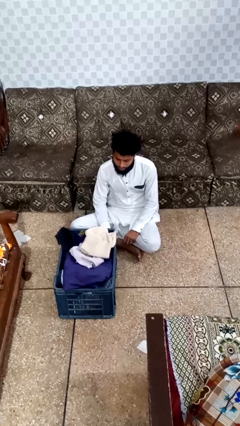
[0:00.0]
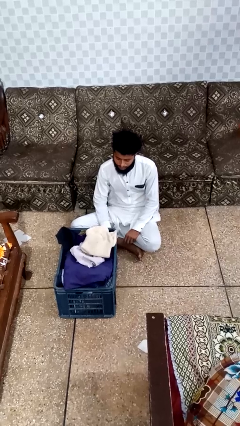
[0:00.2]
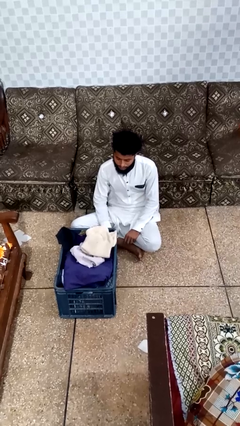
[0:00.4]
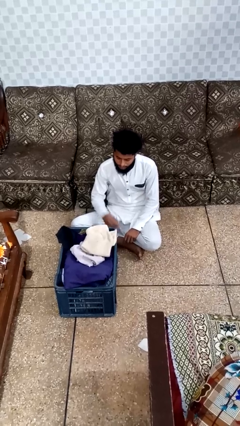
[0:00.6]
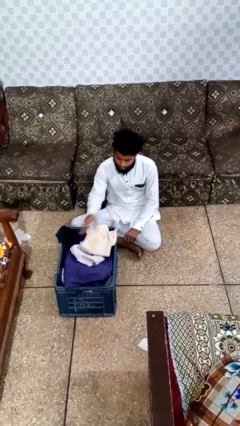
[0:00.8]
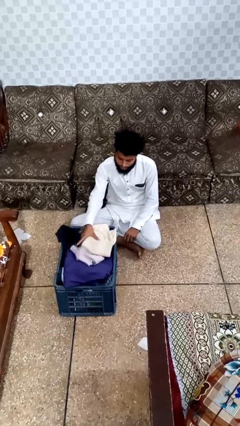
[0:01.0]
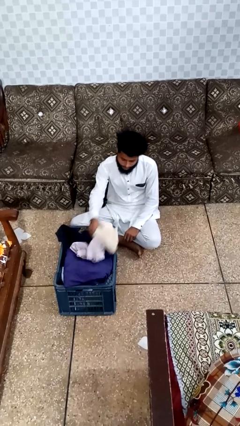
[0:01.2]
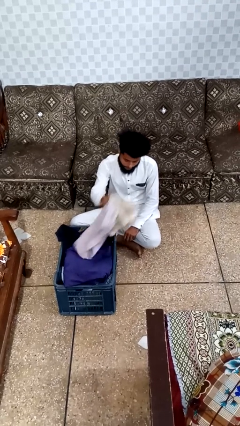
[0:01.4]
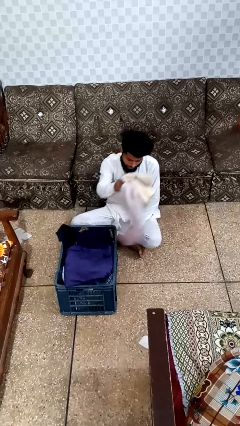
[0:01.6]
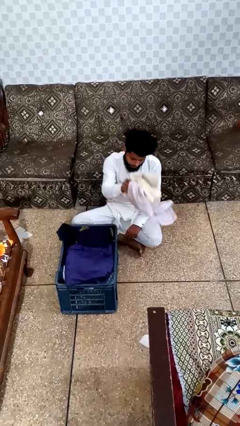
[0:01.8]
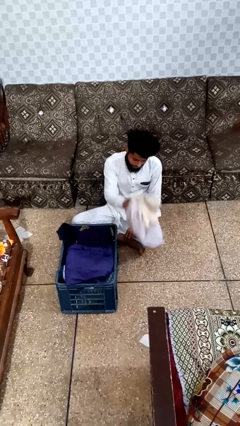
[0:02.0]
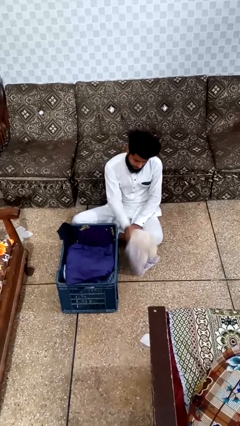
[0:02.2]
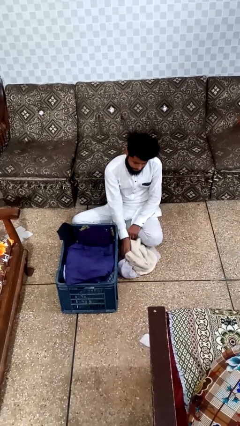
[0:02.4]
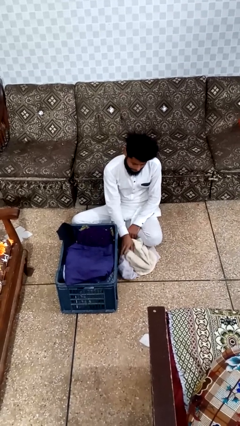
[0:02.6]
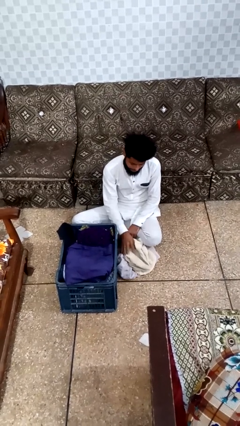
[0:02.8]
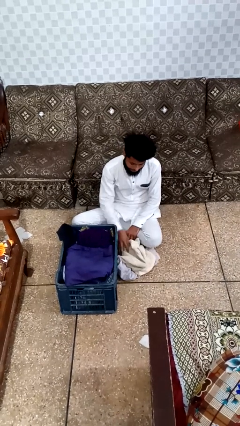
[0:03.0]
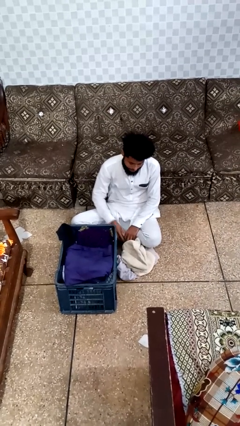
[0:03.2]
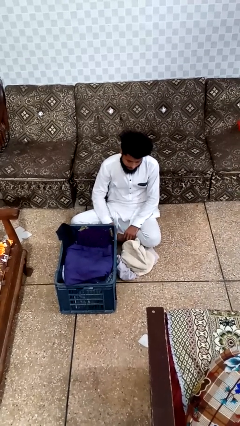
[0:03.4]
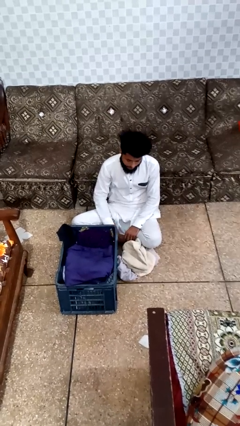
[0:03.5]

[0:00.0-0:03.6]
person puts object into basket

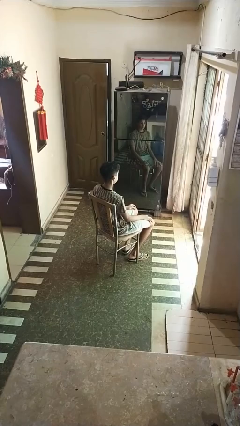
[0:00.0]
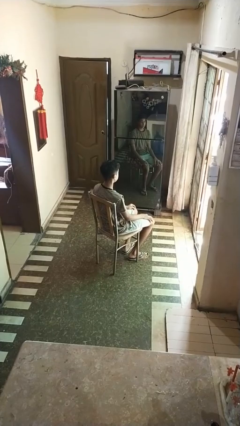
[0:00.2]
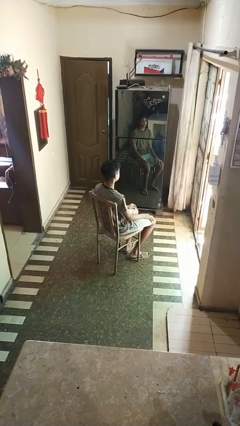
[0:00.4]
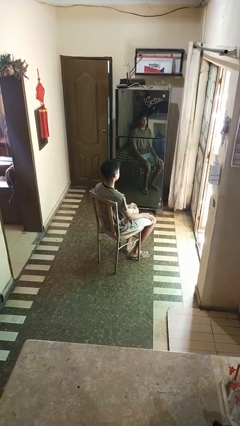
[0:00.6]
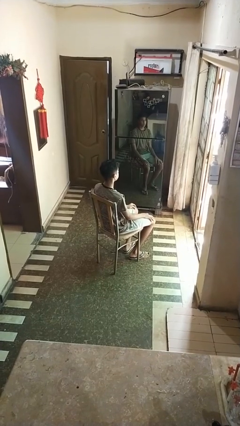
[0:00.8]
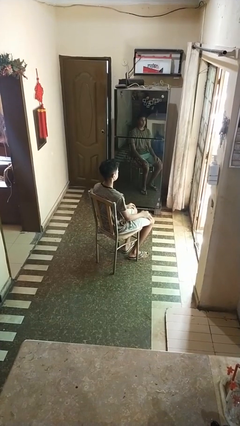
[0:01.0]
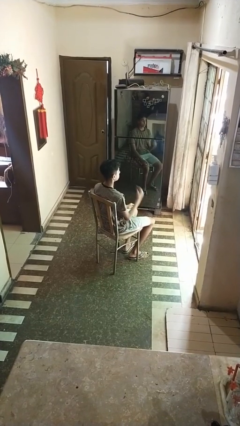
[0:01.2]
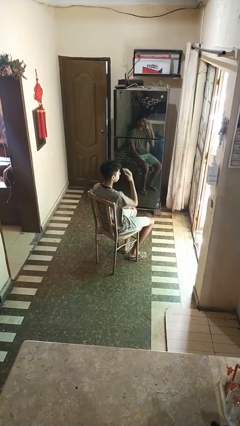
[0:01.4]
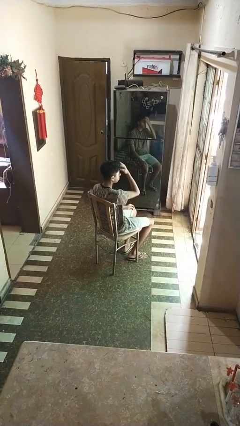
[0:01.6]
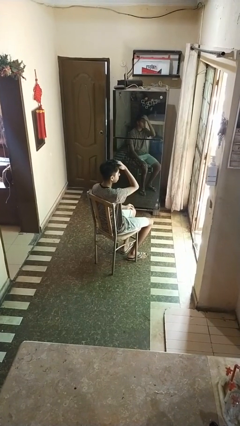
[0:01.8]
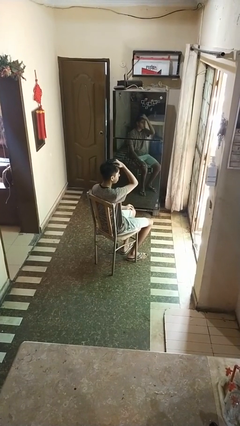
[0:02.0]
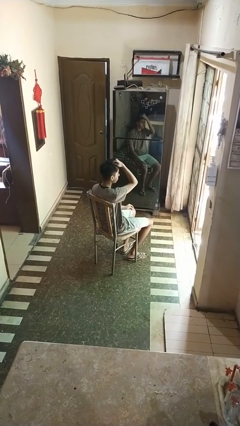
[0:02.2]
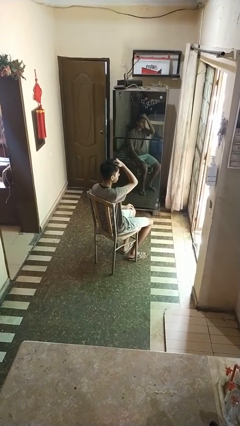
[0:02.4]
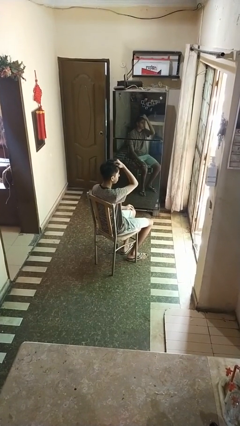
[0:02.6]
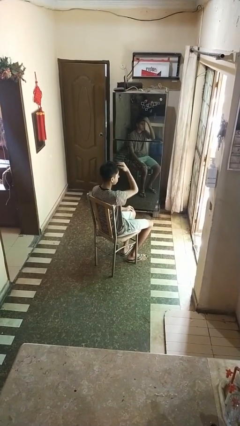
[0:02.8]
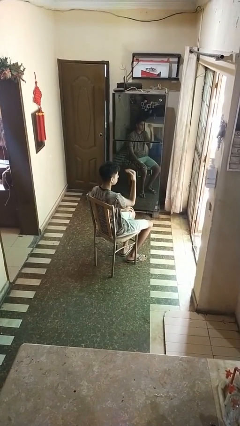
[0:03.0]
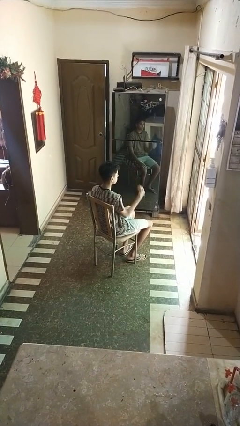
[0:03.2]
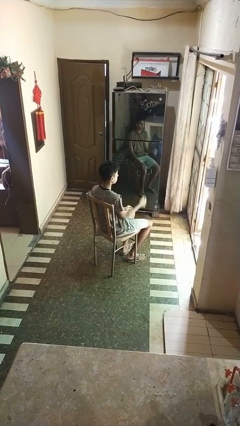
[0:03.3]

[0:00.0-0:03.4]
person strokes hair

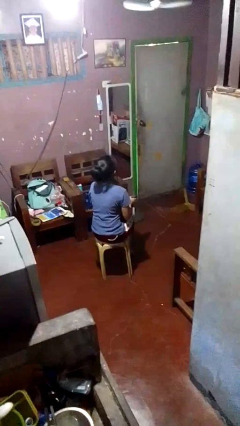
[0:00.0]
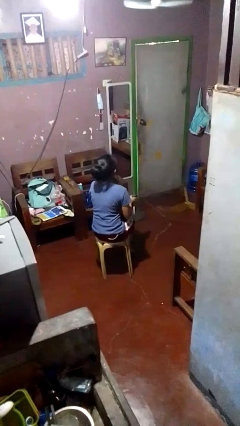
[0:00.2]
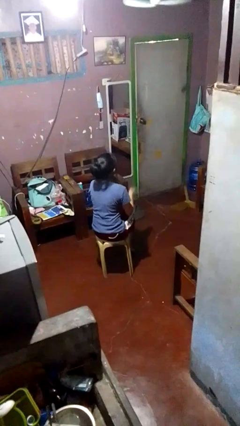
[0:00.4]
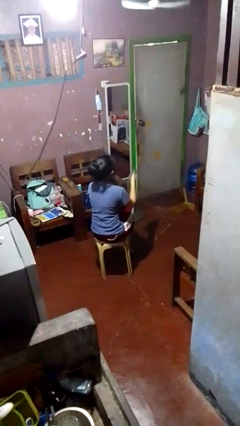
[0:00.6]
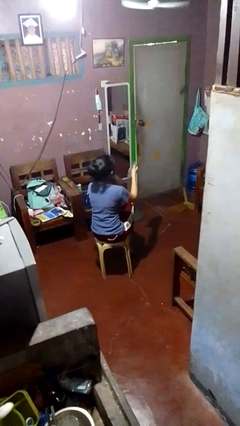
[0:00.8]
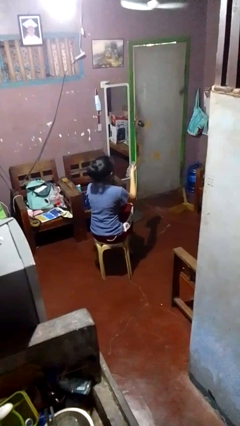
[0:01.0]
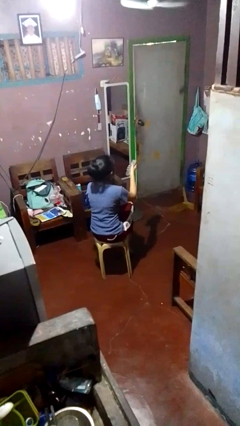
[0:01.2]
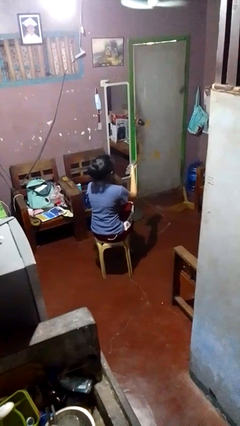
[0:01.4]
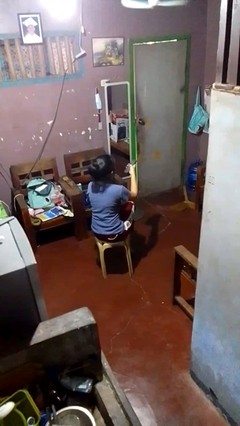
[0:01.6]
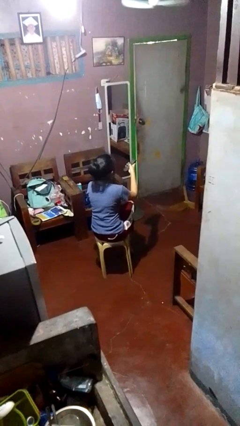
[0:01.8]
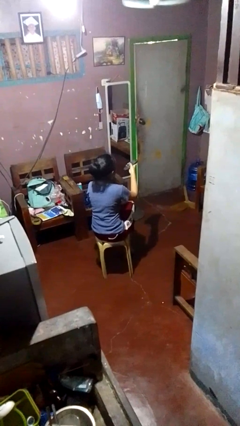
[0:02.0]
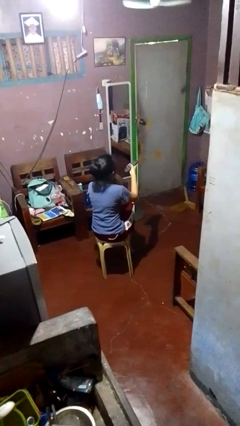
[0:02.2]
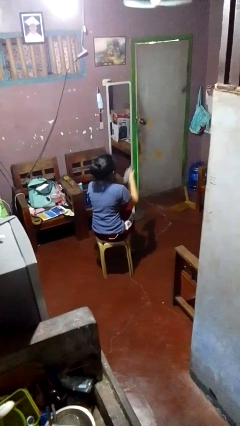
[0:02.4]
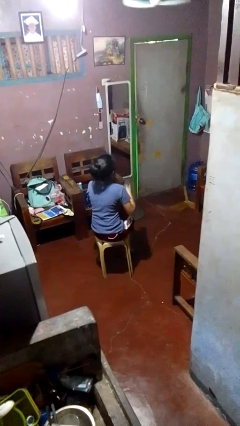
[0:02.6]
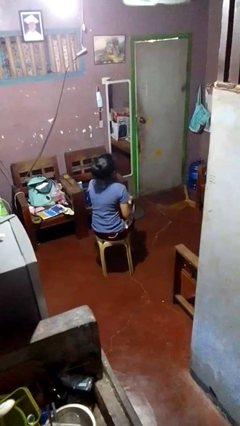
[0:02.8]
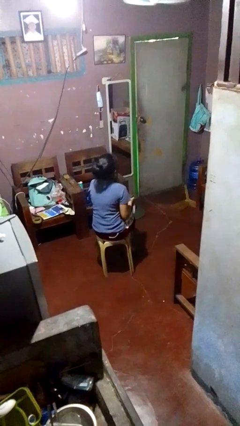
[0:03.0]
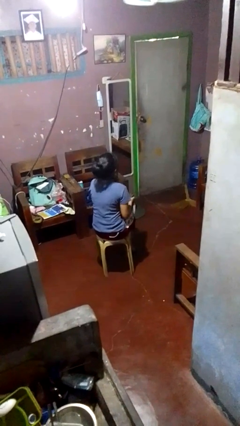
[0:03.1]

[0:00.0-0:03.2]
person uses television remote

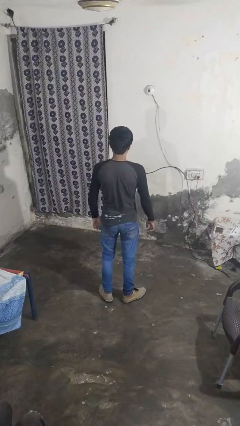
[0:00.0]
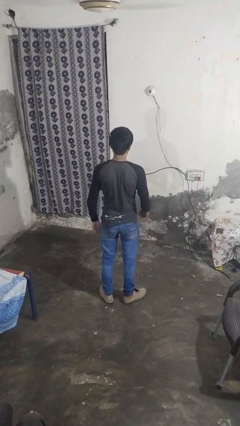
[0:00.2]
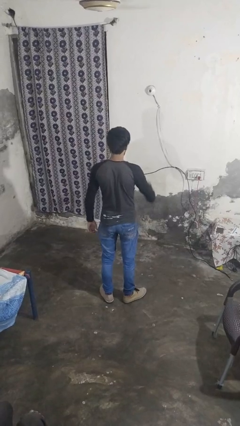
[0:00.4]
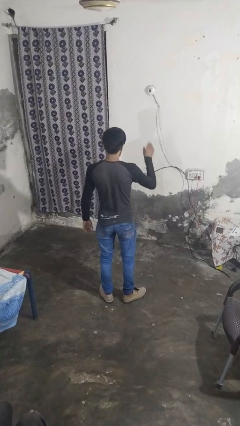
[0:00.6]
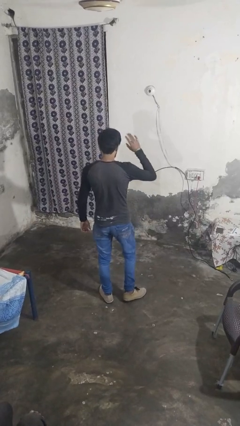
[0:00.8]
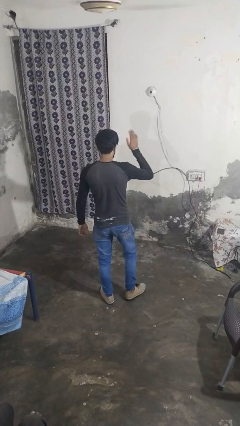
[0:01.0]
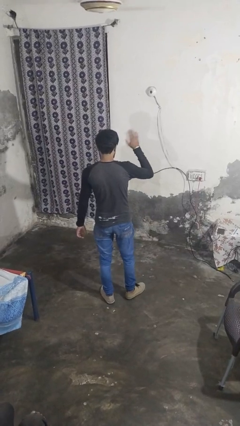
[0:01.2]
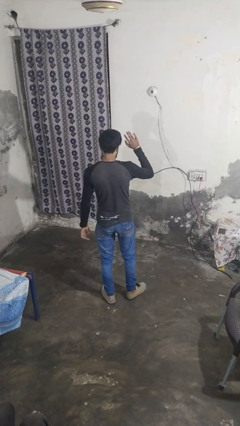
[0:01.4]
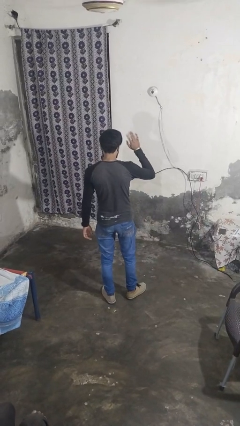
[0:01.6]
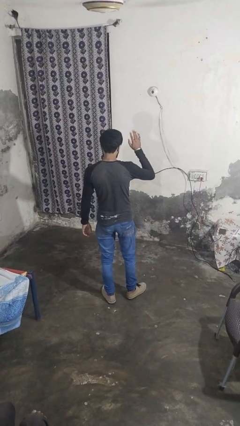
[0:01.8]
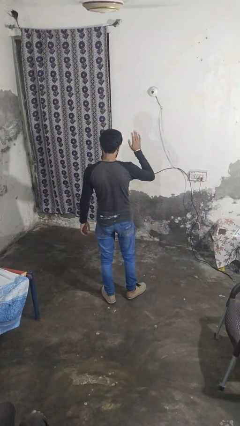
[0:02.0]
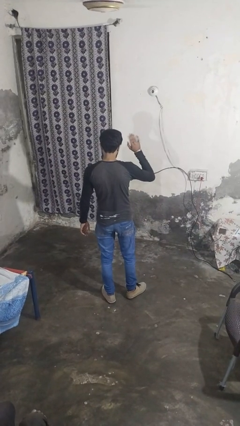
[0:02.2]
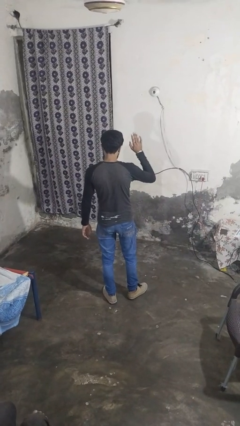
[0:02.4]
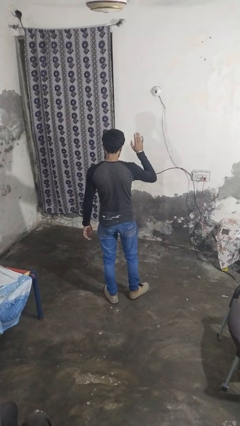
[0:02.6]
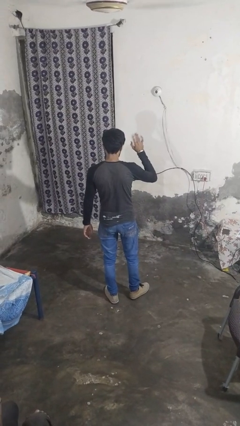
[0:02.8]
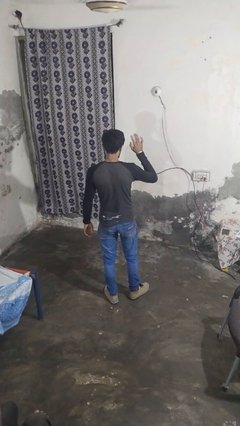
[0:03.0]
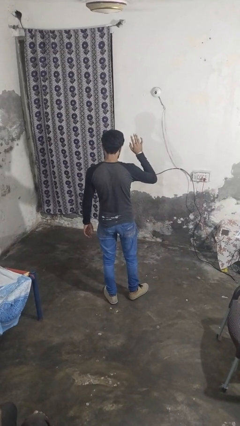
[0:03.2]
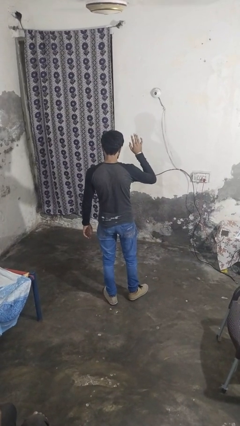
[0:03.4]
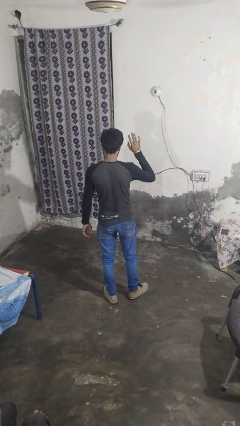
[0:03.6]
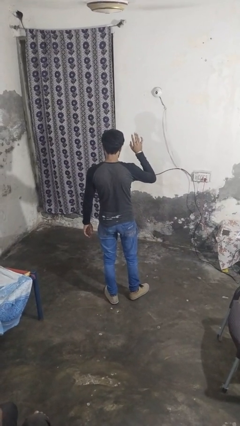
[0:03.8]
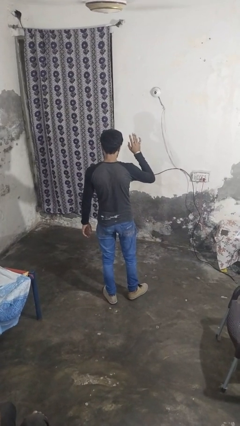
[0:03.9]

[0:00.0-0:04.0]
person waves at person

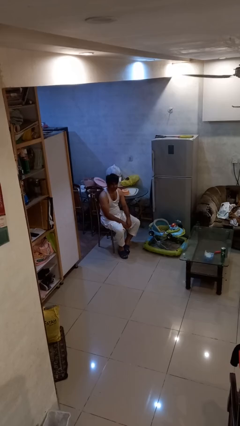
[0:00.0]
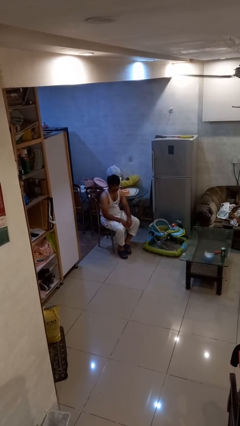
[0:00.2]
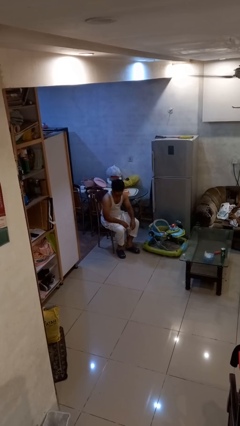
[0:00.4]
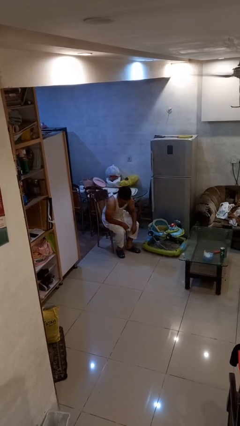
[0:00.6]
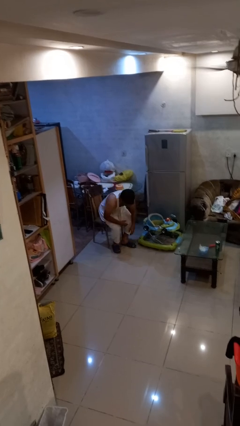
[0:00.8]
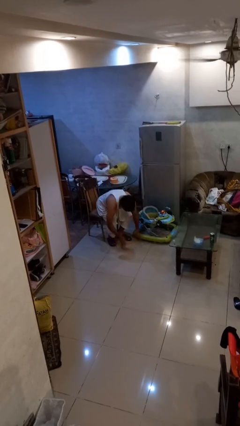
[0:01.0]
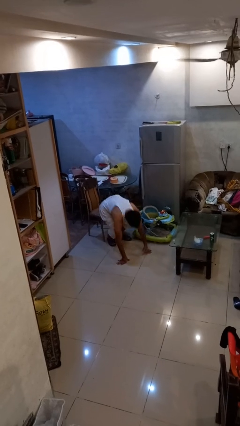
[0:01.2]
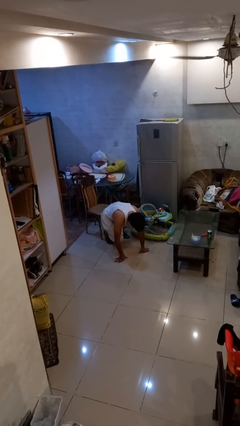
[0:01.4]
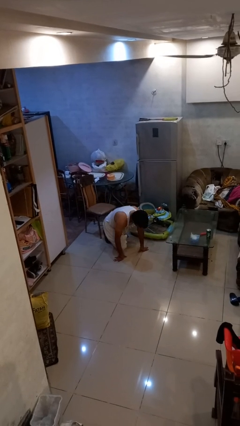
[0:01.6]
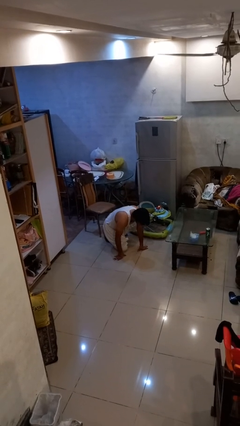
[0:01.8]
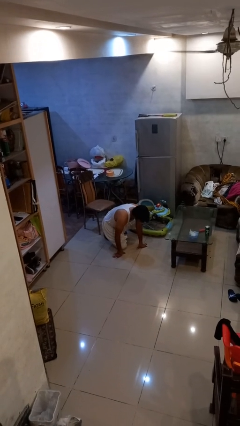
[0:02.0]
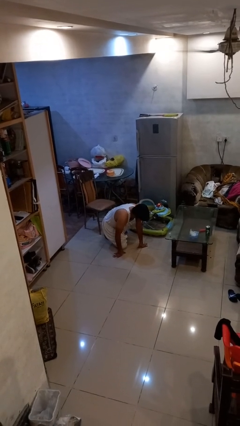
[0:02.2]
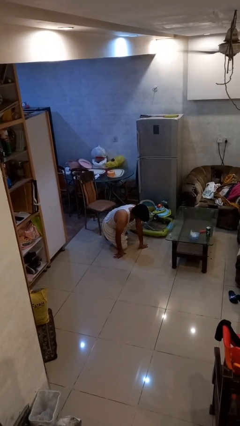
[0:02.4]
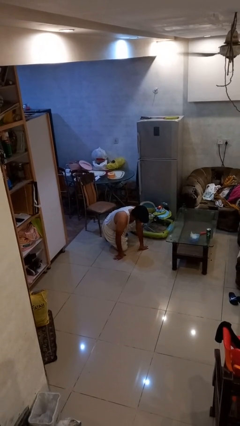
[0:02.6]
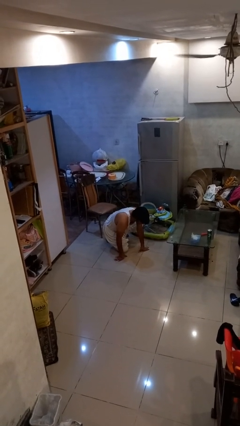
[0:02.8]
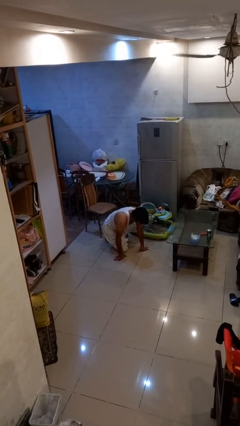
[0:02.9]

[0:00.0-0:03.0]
person falls from chair
